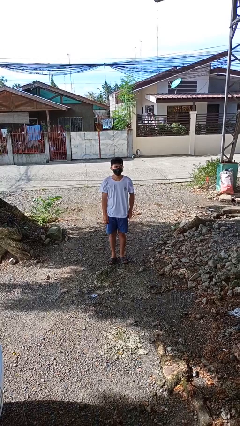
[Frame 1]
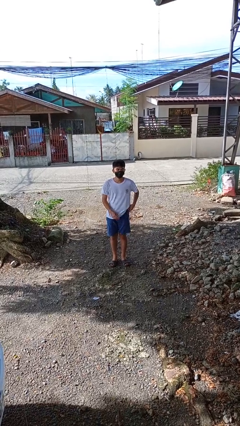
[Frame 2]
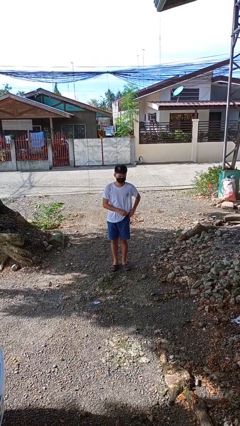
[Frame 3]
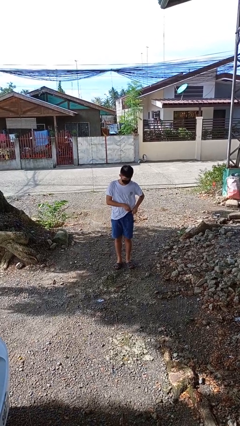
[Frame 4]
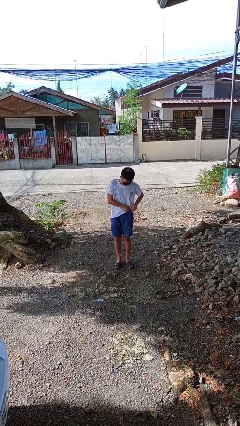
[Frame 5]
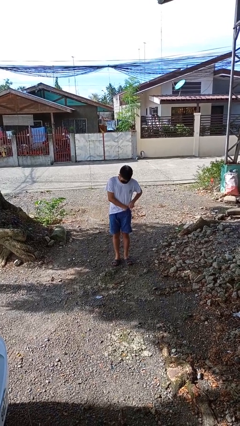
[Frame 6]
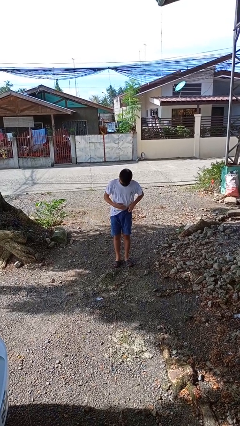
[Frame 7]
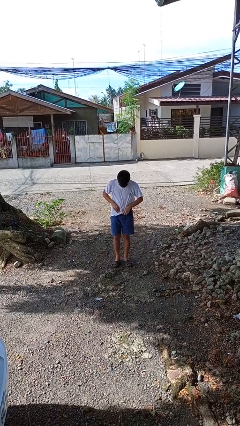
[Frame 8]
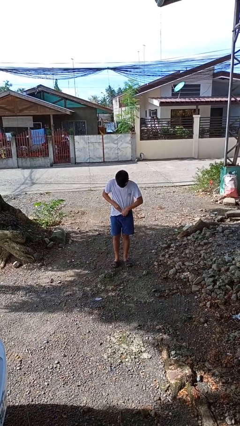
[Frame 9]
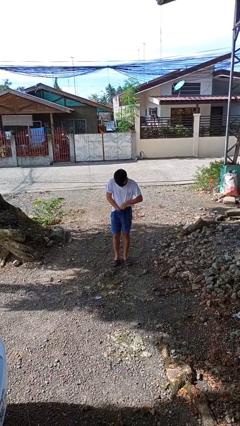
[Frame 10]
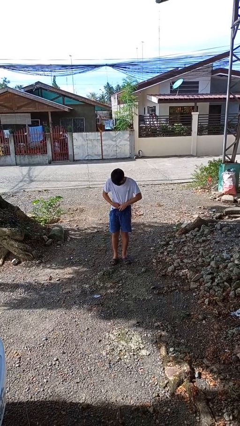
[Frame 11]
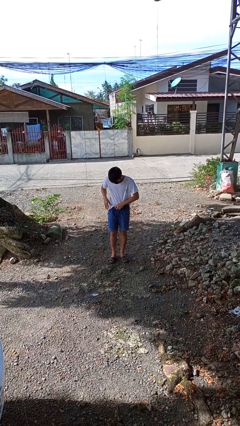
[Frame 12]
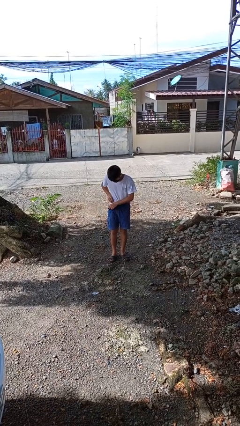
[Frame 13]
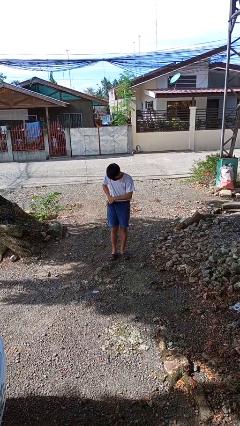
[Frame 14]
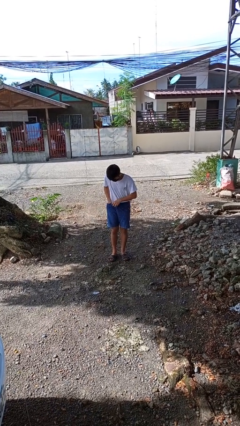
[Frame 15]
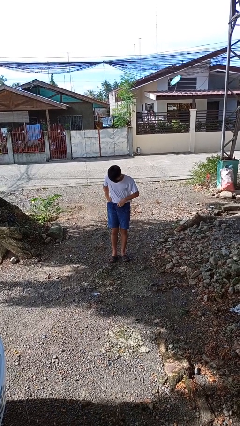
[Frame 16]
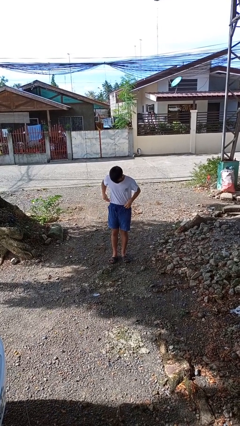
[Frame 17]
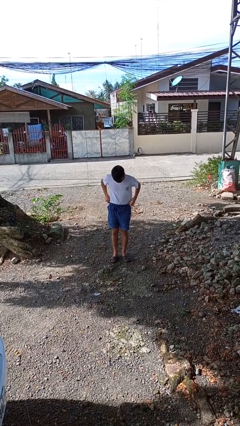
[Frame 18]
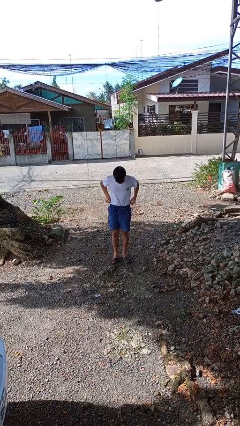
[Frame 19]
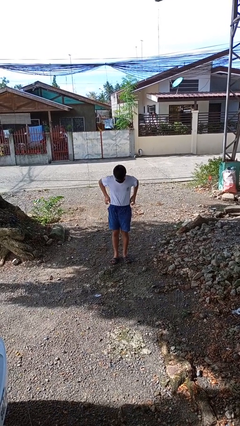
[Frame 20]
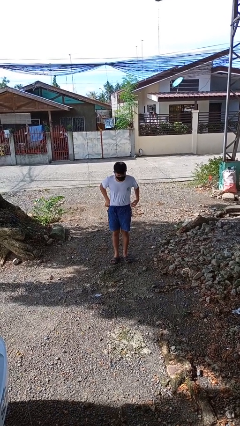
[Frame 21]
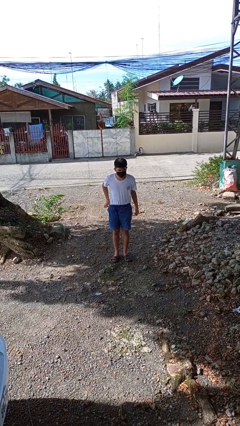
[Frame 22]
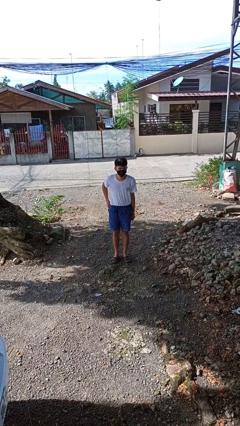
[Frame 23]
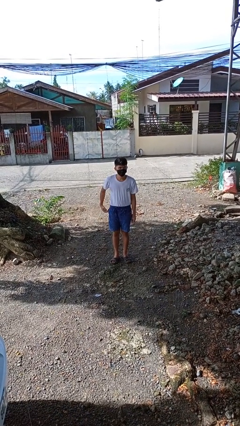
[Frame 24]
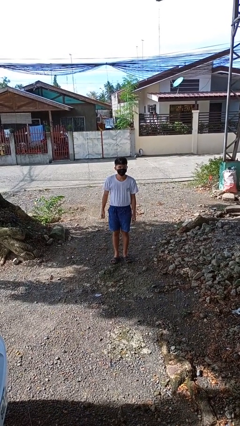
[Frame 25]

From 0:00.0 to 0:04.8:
person tucks in shirt

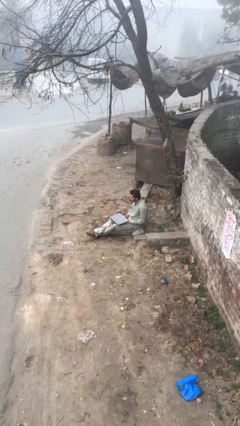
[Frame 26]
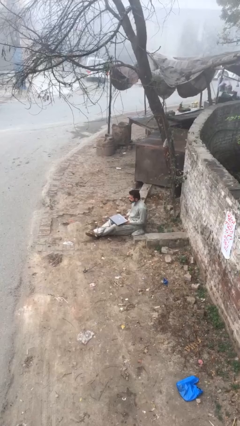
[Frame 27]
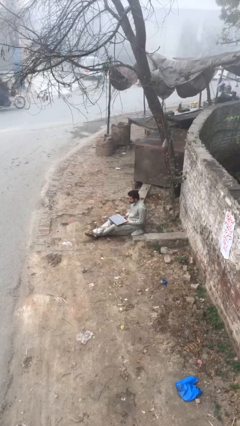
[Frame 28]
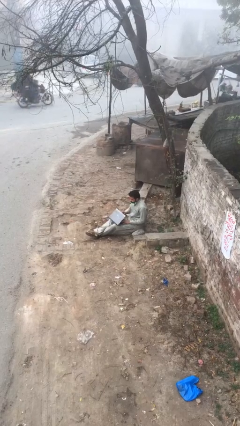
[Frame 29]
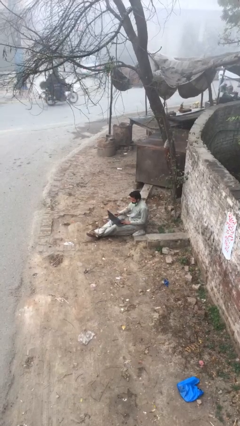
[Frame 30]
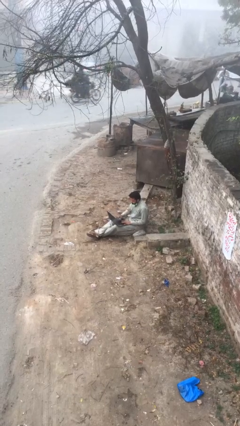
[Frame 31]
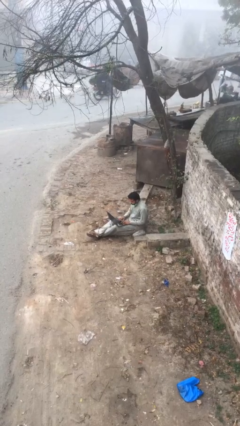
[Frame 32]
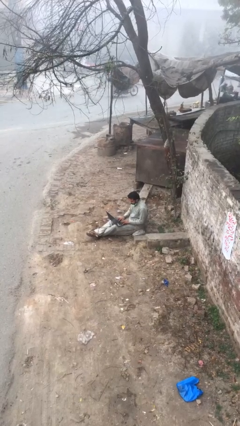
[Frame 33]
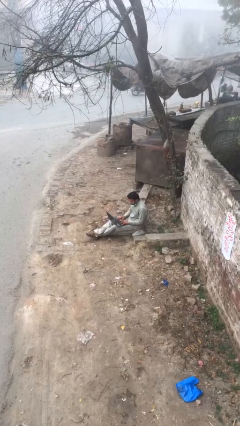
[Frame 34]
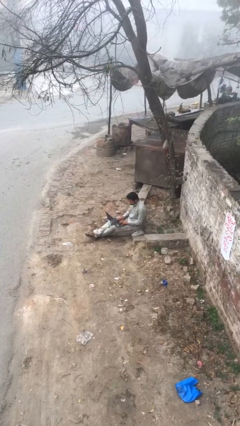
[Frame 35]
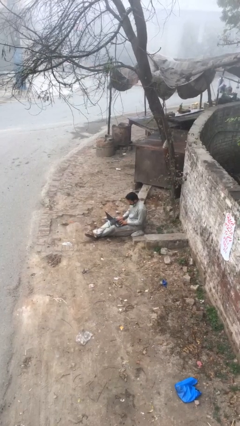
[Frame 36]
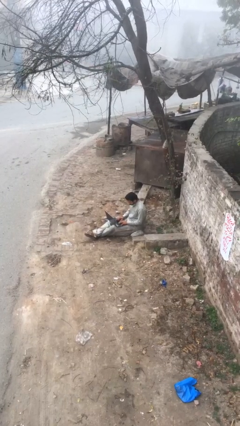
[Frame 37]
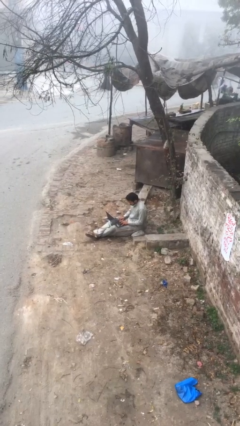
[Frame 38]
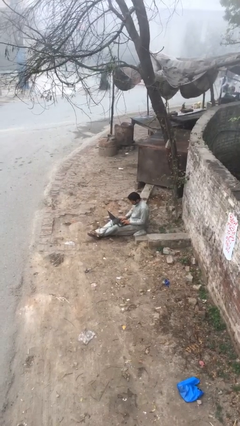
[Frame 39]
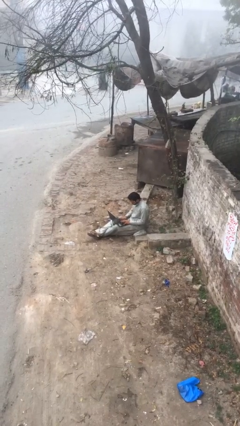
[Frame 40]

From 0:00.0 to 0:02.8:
person interacts with laptop

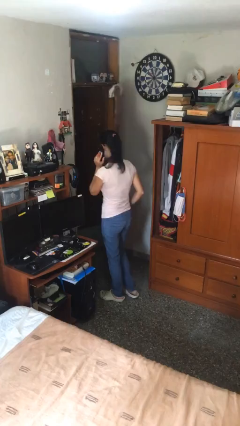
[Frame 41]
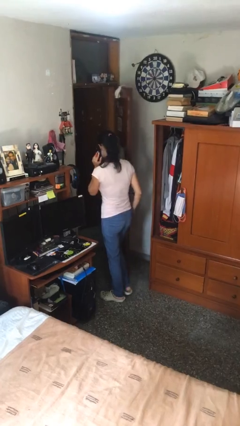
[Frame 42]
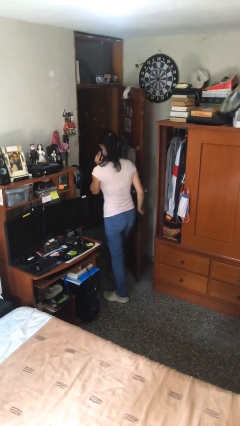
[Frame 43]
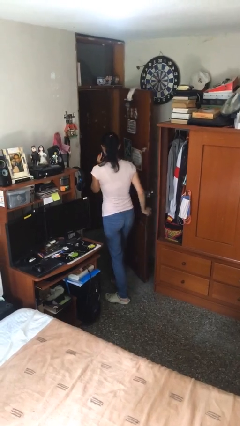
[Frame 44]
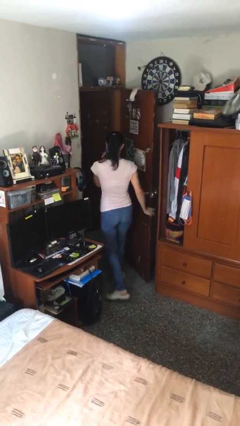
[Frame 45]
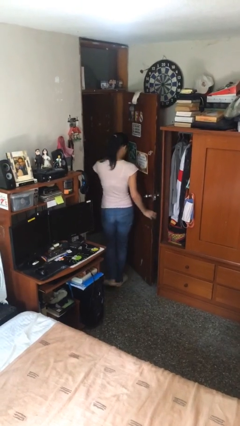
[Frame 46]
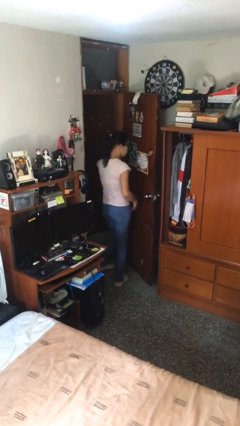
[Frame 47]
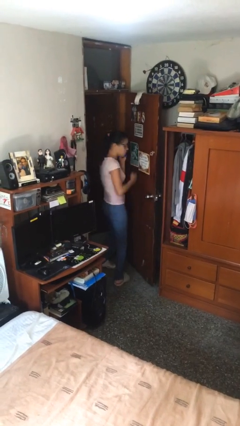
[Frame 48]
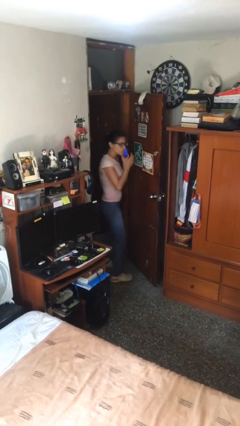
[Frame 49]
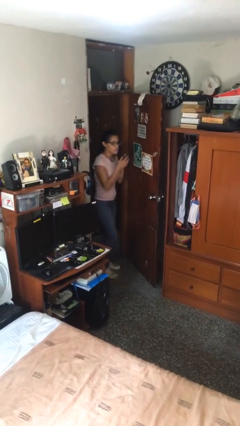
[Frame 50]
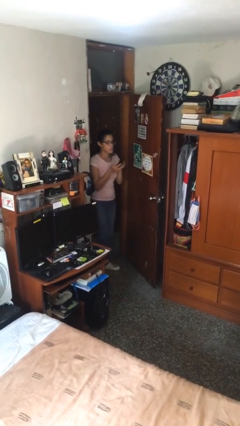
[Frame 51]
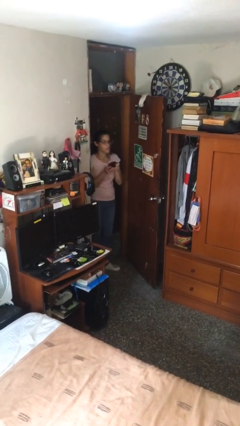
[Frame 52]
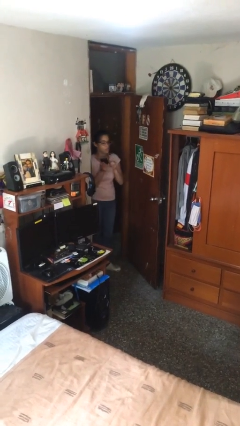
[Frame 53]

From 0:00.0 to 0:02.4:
person exits scene through structure

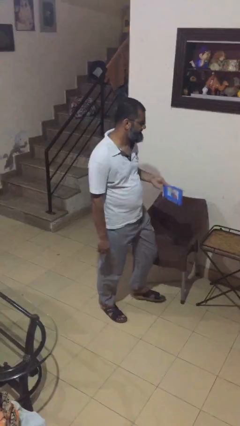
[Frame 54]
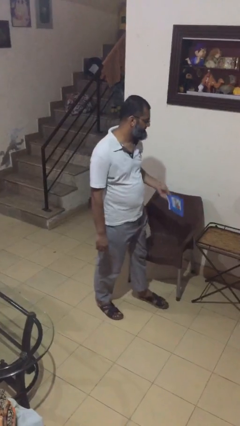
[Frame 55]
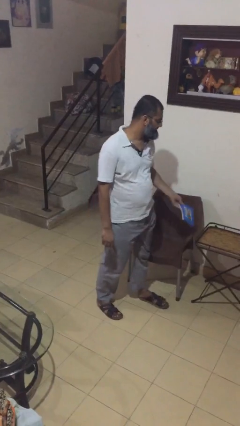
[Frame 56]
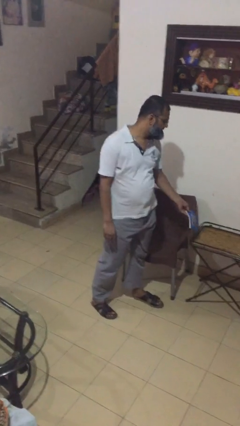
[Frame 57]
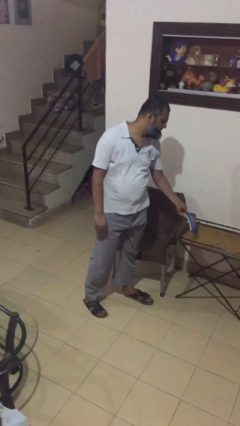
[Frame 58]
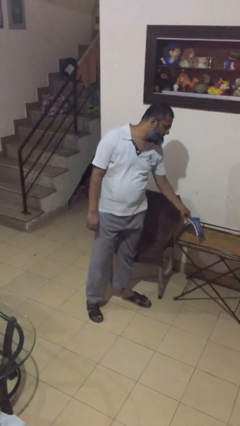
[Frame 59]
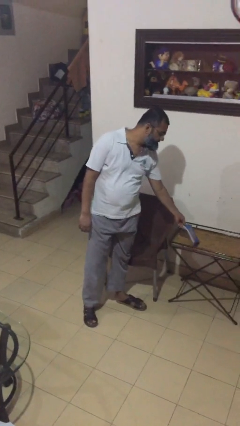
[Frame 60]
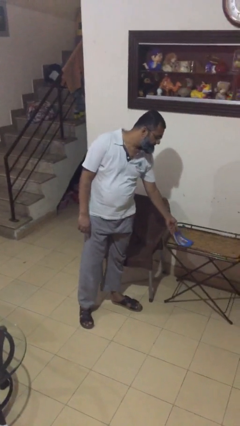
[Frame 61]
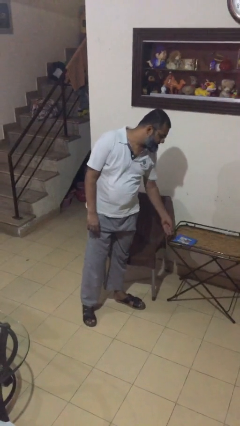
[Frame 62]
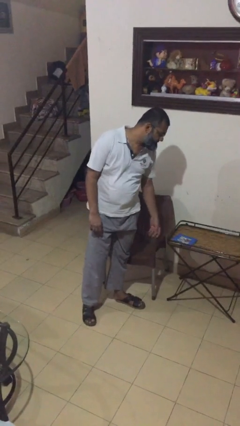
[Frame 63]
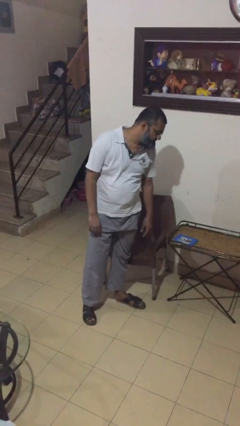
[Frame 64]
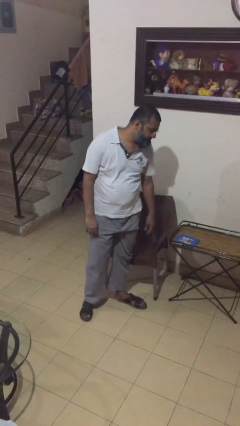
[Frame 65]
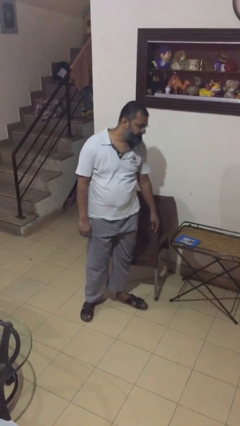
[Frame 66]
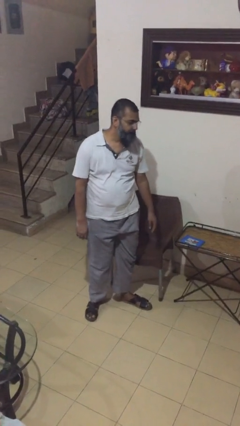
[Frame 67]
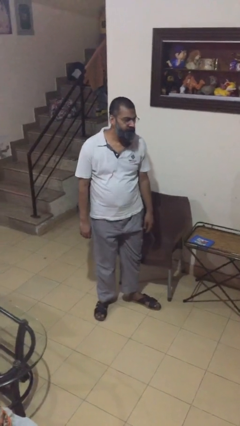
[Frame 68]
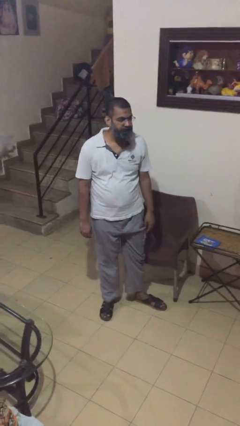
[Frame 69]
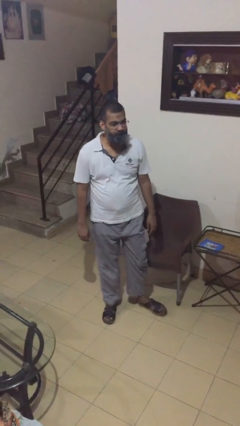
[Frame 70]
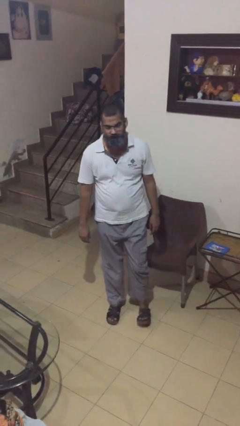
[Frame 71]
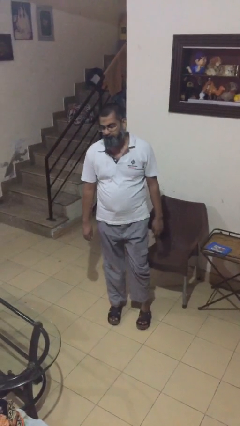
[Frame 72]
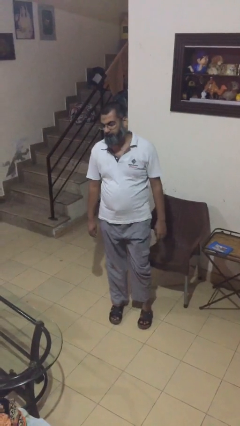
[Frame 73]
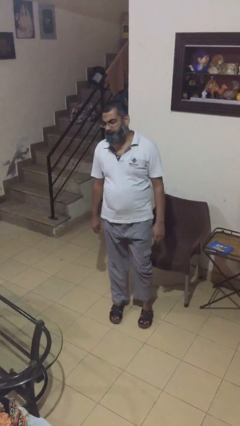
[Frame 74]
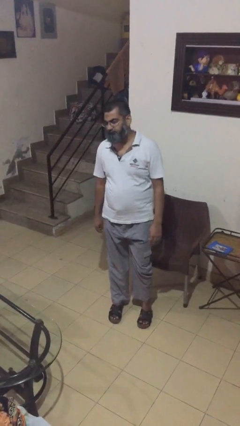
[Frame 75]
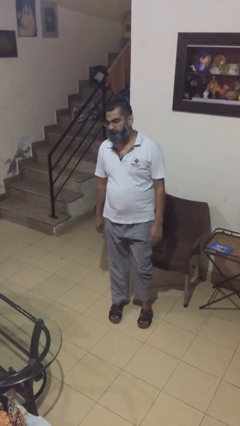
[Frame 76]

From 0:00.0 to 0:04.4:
person puts down object on table

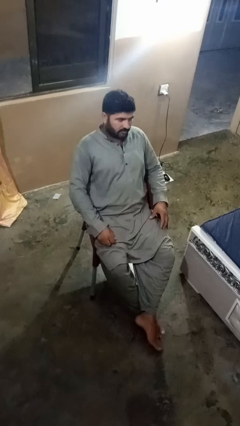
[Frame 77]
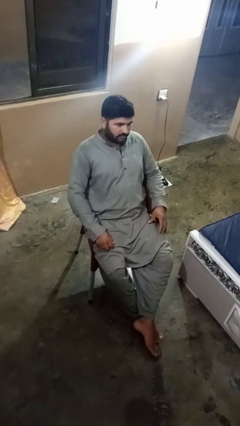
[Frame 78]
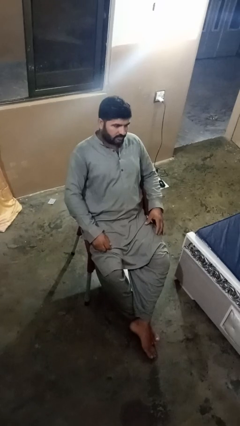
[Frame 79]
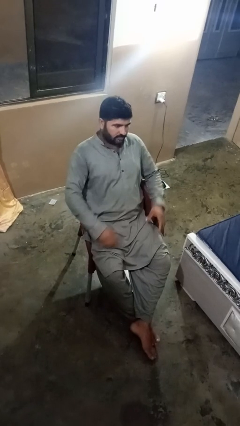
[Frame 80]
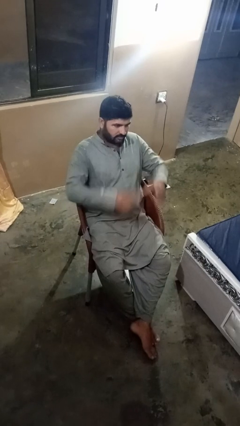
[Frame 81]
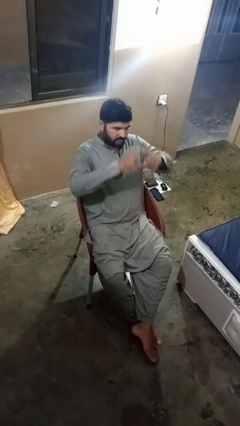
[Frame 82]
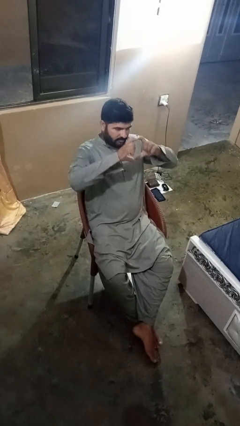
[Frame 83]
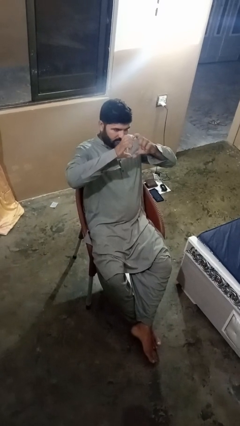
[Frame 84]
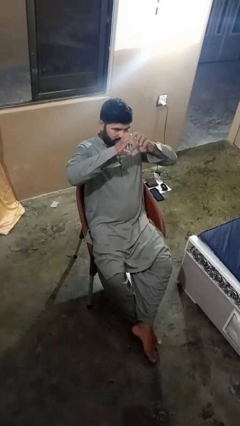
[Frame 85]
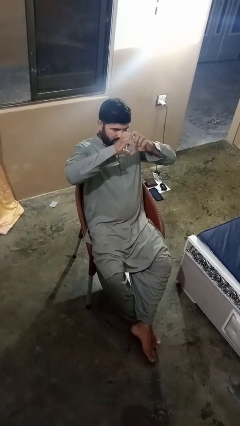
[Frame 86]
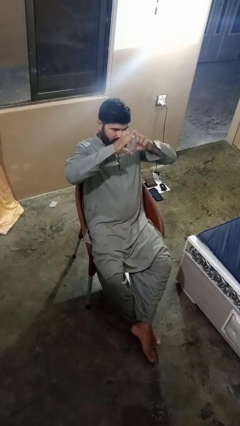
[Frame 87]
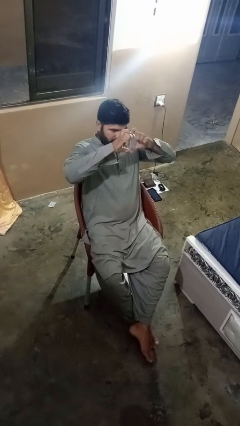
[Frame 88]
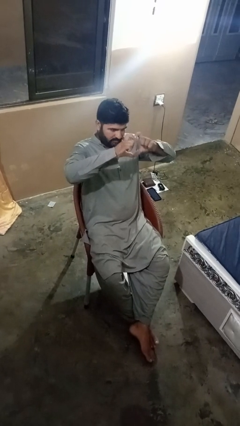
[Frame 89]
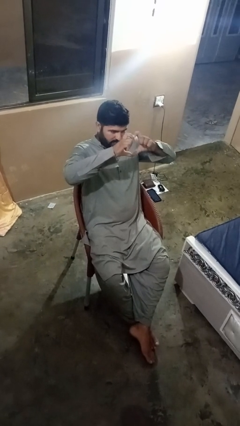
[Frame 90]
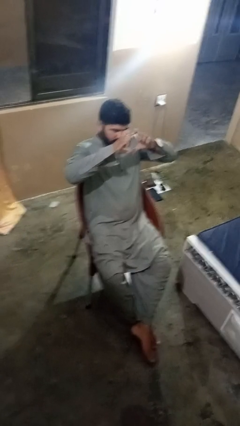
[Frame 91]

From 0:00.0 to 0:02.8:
person gestures heart
